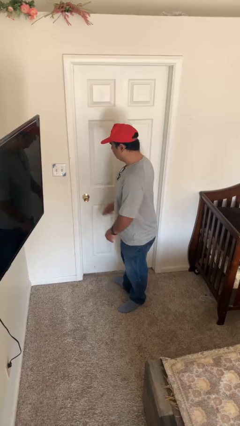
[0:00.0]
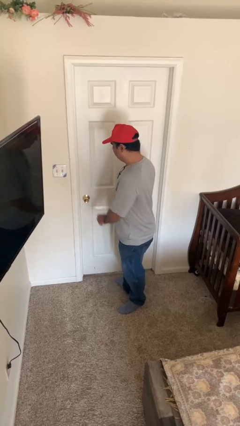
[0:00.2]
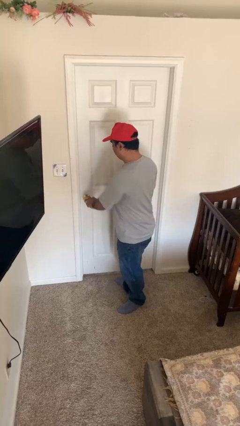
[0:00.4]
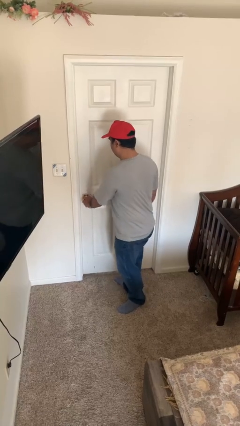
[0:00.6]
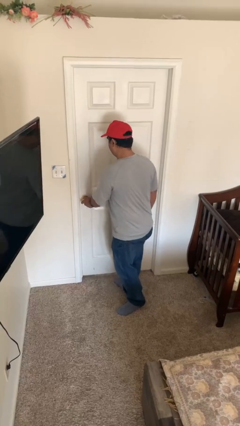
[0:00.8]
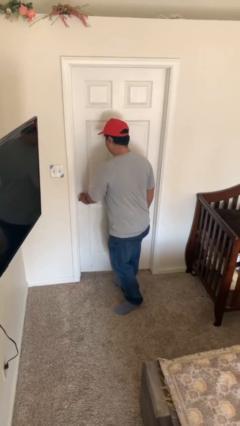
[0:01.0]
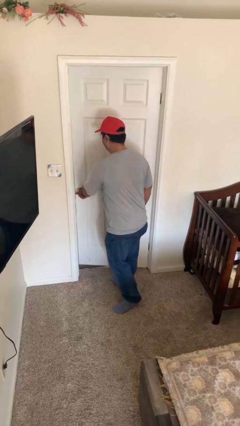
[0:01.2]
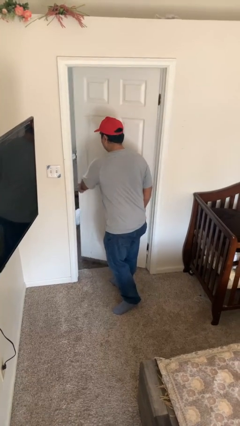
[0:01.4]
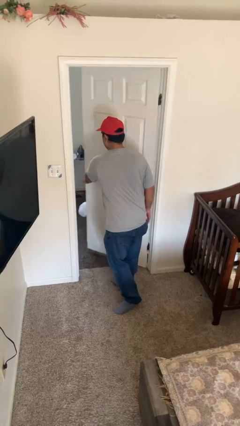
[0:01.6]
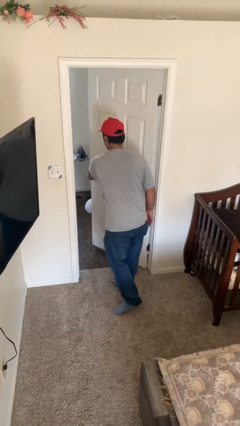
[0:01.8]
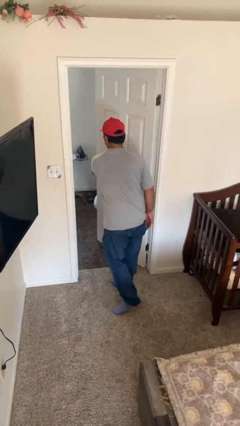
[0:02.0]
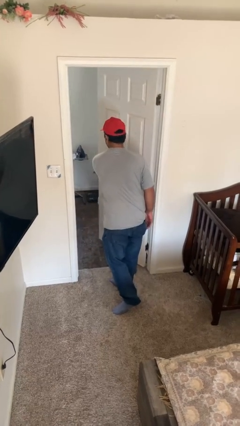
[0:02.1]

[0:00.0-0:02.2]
person opens facility door

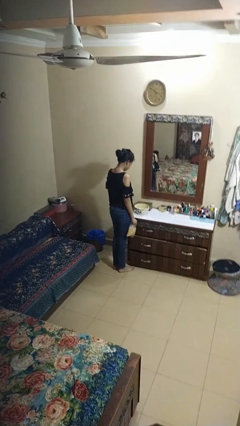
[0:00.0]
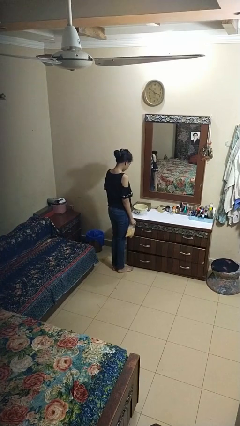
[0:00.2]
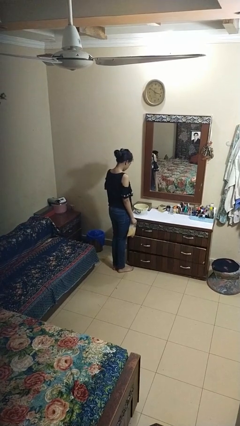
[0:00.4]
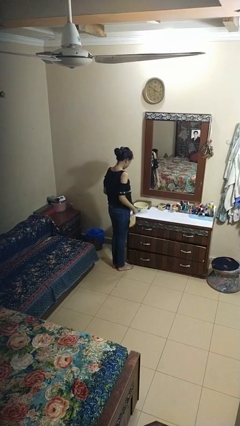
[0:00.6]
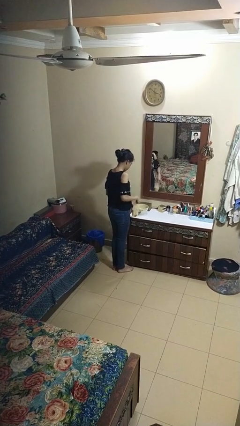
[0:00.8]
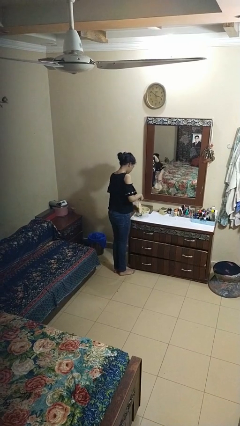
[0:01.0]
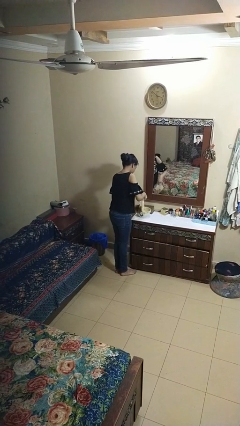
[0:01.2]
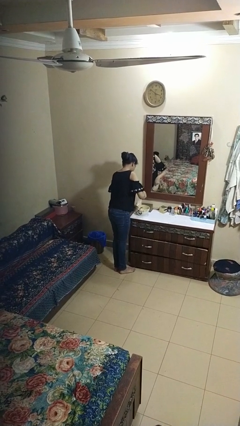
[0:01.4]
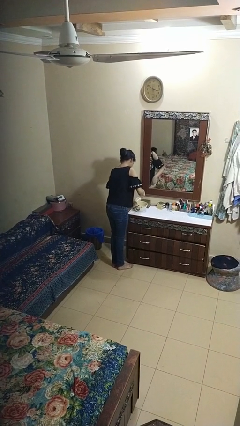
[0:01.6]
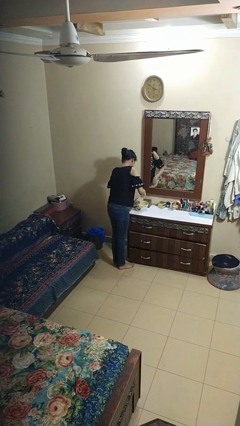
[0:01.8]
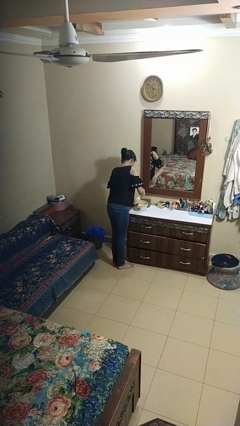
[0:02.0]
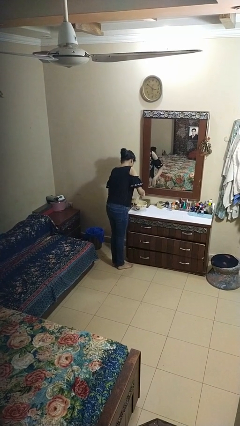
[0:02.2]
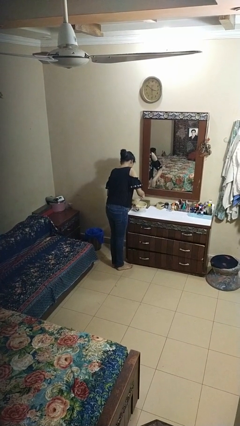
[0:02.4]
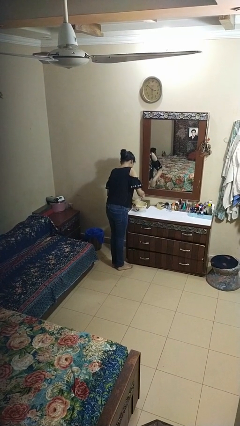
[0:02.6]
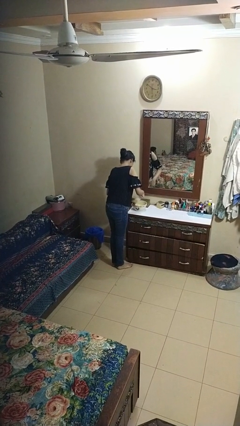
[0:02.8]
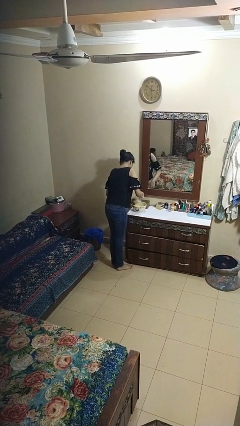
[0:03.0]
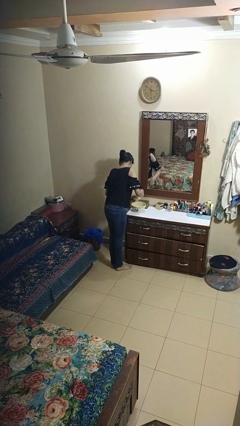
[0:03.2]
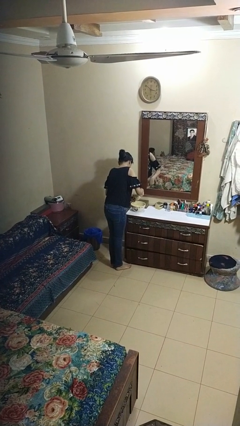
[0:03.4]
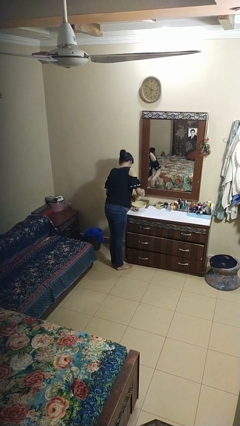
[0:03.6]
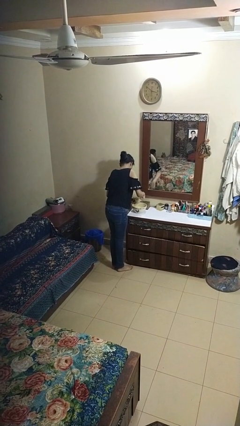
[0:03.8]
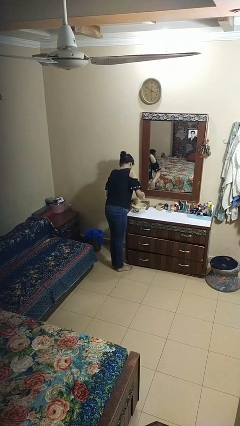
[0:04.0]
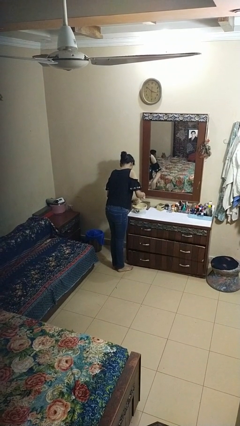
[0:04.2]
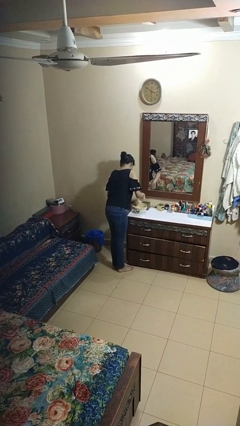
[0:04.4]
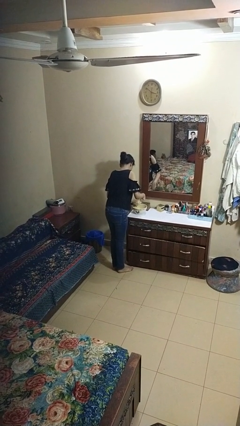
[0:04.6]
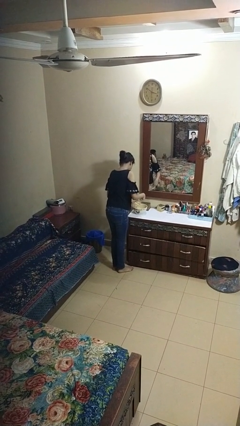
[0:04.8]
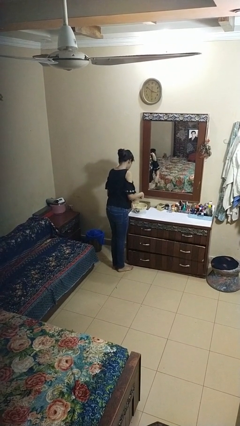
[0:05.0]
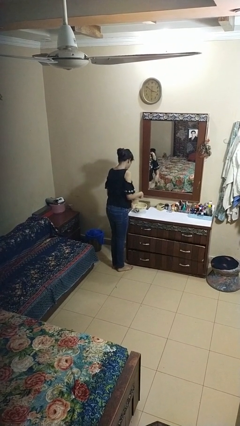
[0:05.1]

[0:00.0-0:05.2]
person pours into bowl

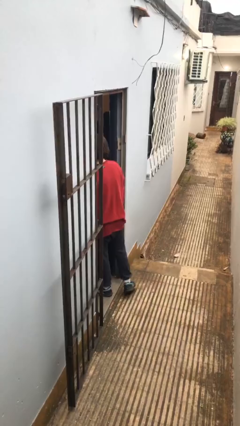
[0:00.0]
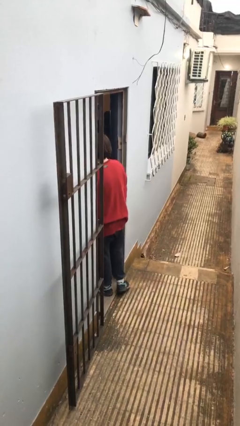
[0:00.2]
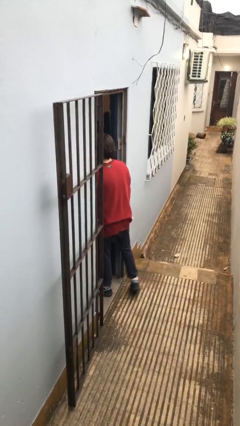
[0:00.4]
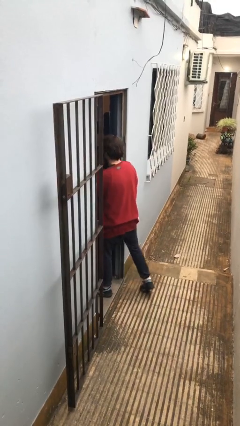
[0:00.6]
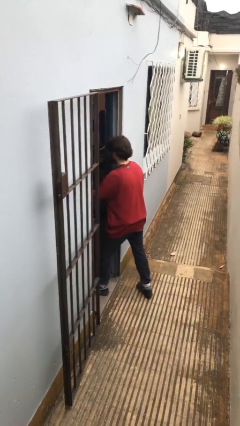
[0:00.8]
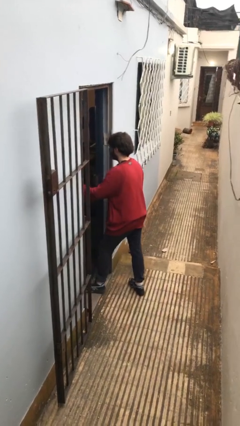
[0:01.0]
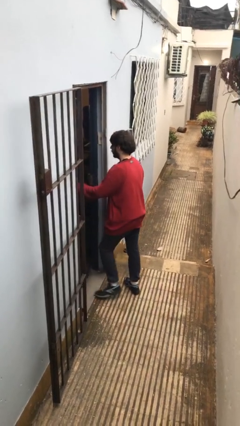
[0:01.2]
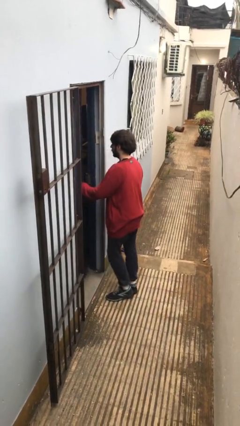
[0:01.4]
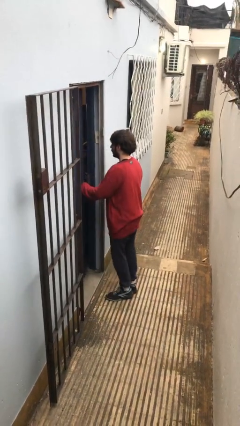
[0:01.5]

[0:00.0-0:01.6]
person closes facility door

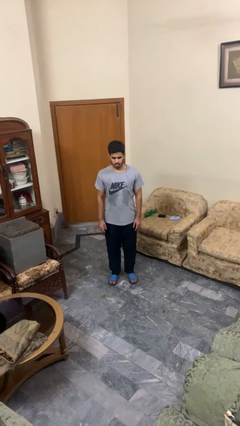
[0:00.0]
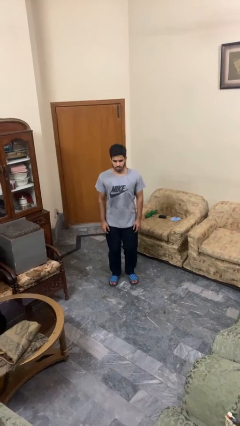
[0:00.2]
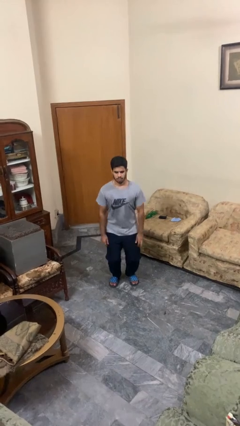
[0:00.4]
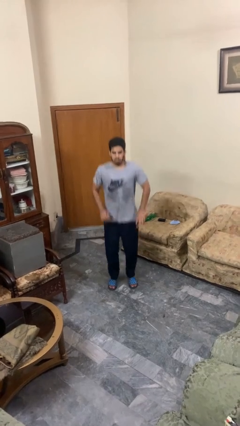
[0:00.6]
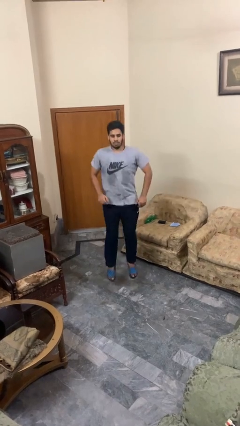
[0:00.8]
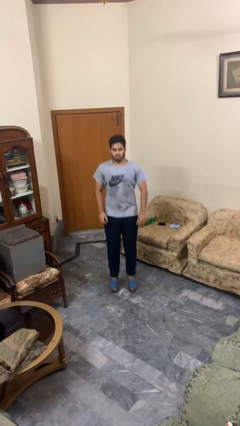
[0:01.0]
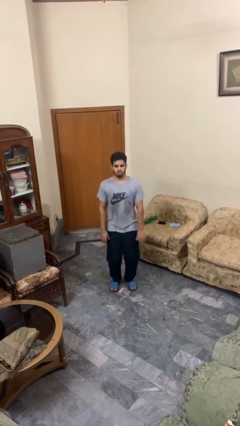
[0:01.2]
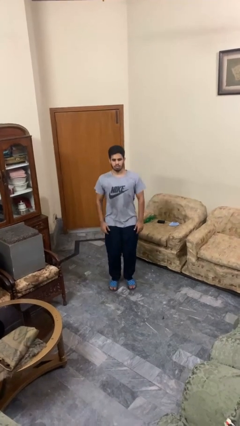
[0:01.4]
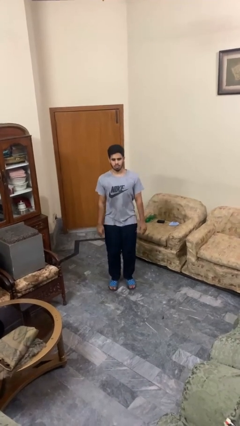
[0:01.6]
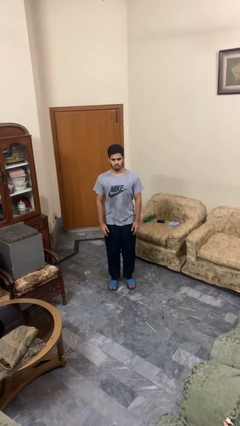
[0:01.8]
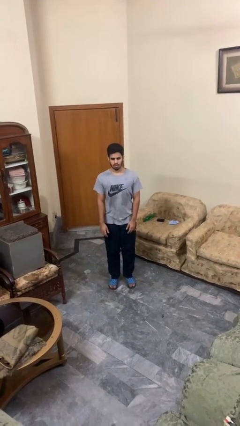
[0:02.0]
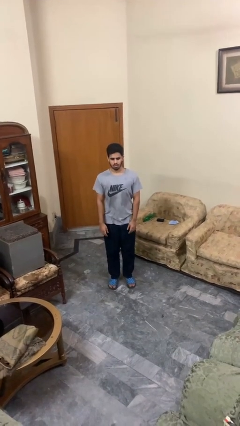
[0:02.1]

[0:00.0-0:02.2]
person jumps

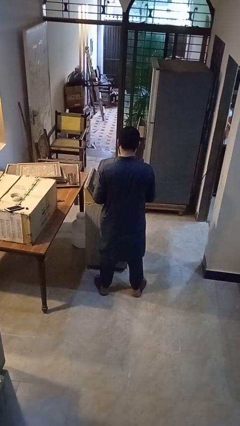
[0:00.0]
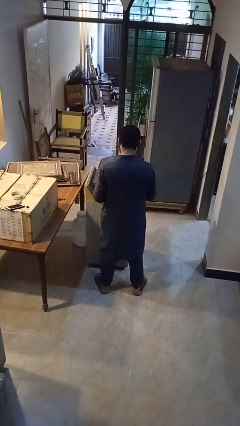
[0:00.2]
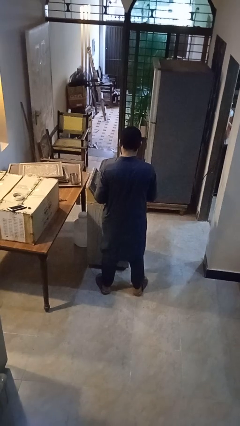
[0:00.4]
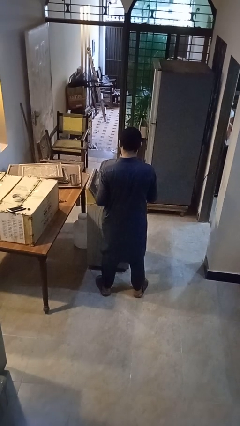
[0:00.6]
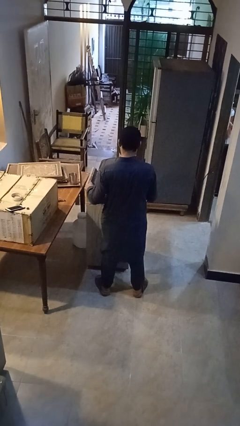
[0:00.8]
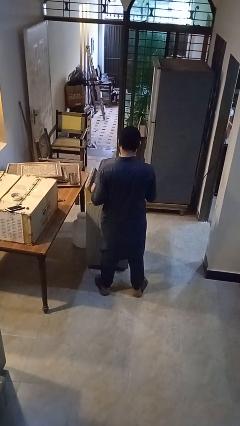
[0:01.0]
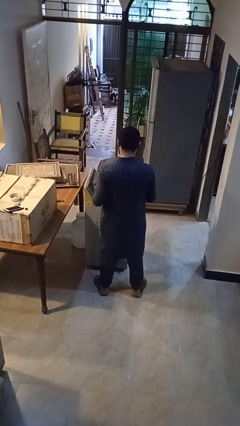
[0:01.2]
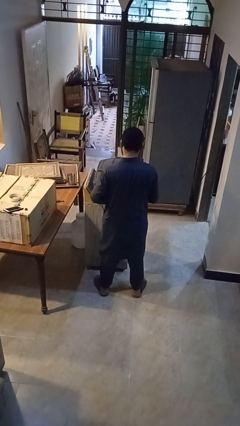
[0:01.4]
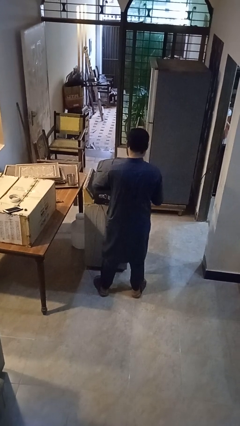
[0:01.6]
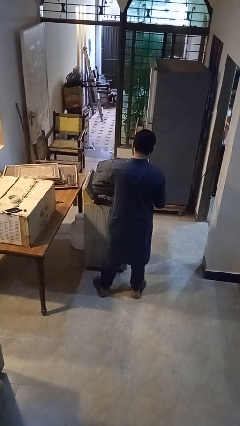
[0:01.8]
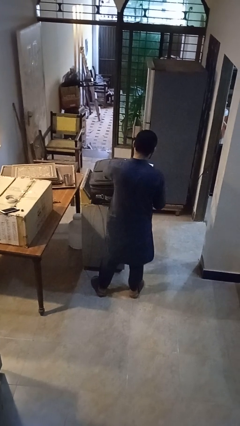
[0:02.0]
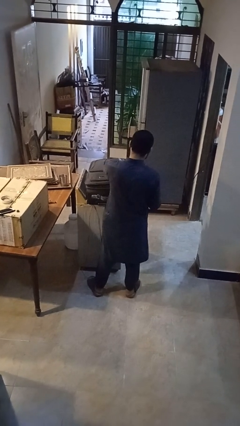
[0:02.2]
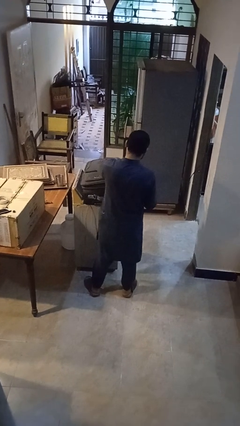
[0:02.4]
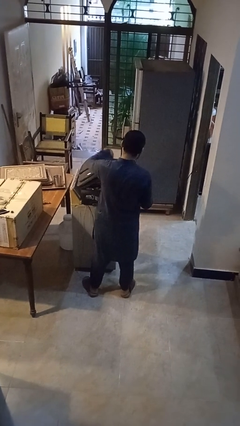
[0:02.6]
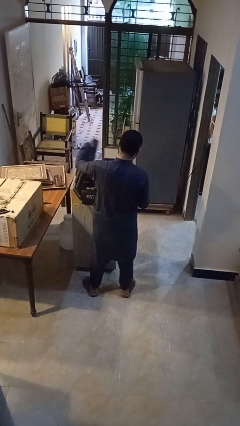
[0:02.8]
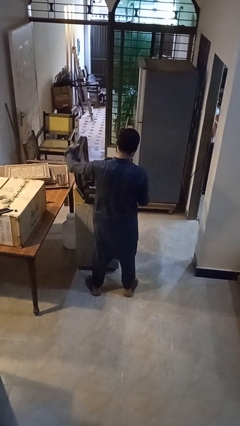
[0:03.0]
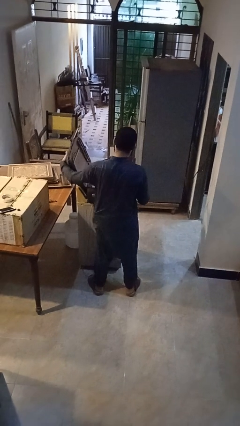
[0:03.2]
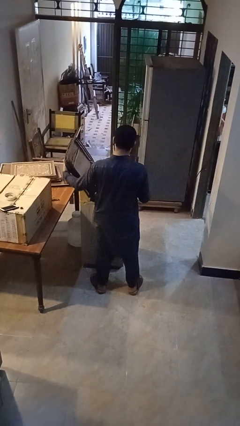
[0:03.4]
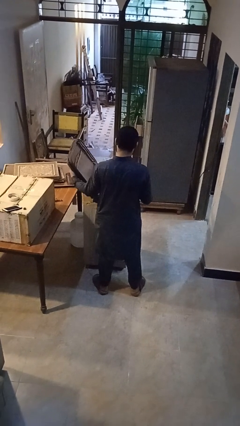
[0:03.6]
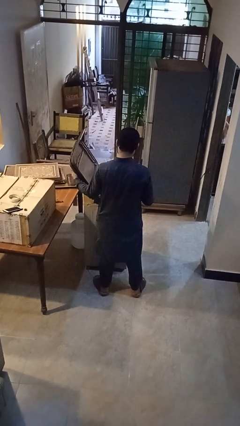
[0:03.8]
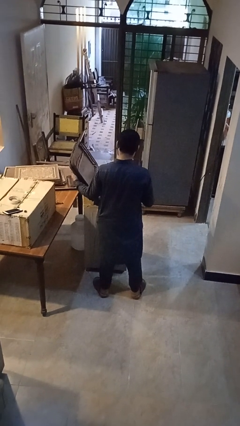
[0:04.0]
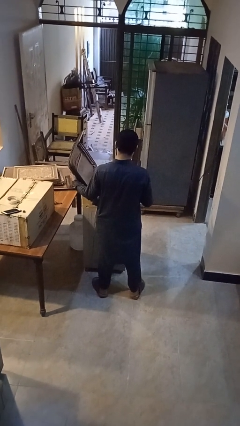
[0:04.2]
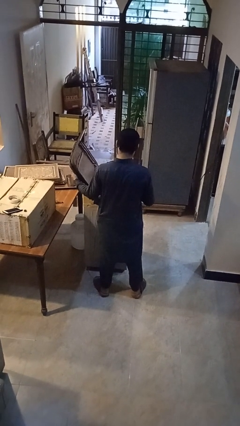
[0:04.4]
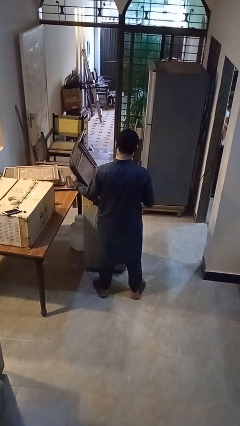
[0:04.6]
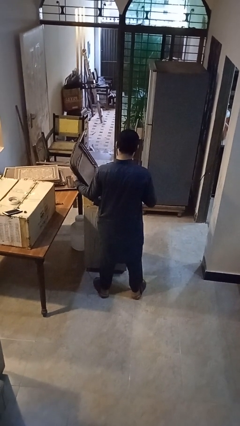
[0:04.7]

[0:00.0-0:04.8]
person opens suitcase

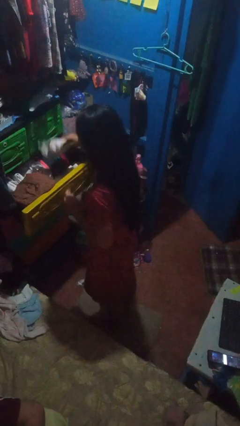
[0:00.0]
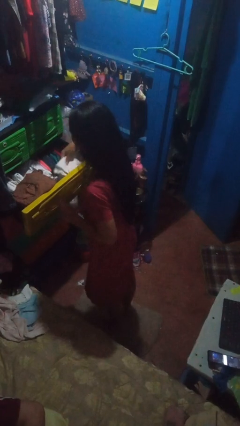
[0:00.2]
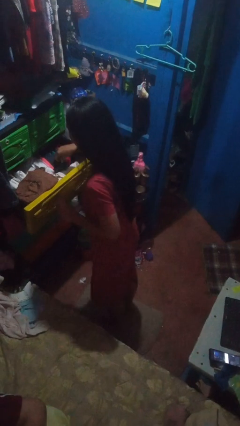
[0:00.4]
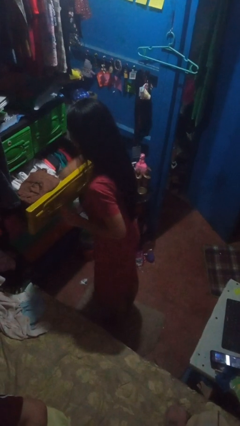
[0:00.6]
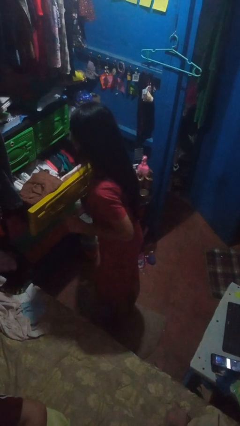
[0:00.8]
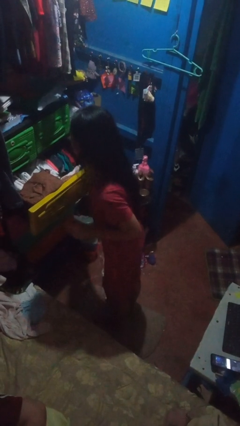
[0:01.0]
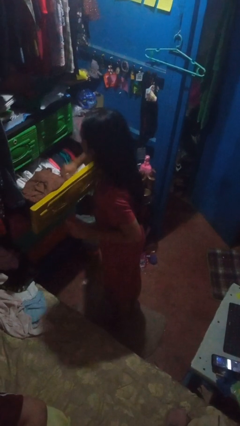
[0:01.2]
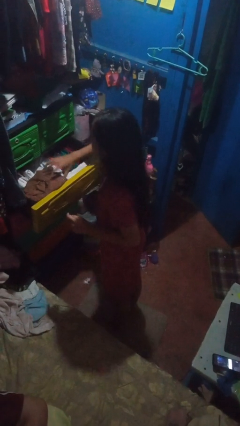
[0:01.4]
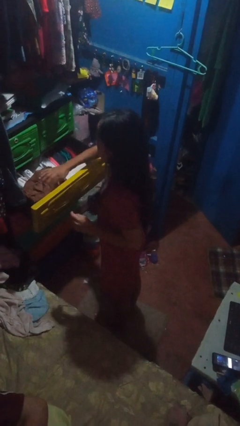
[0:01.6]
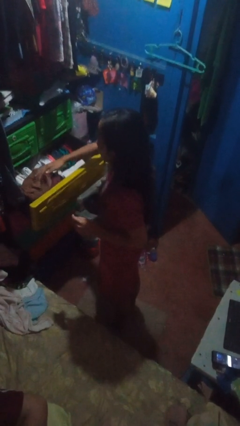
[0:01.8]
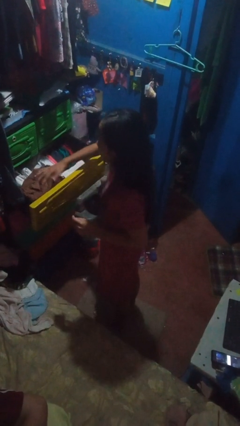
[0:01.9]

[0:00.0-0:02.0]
person puts clothes into dresser
